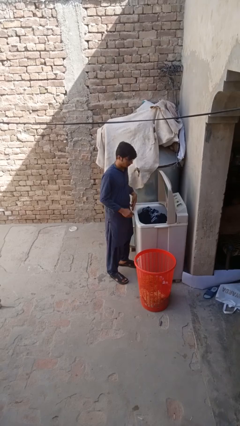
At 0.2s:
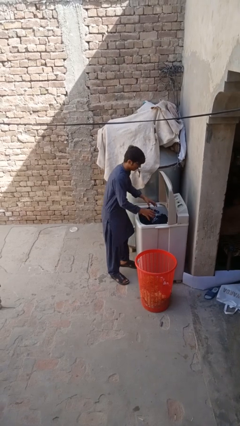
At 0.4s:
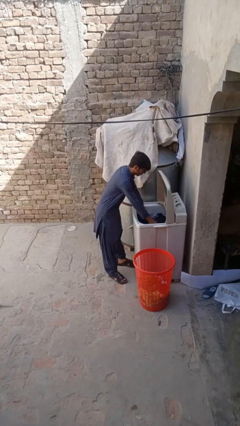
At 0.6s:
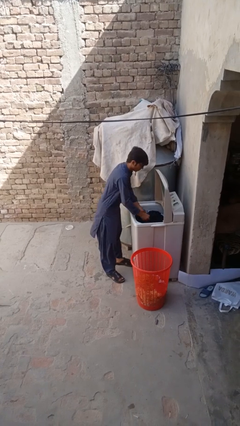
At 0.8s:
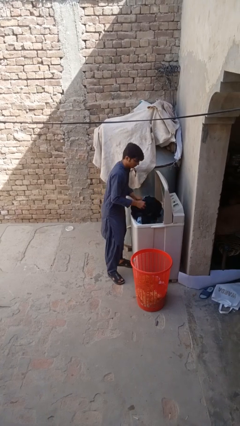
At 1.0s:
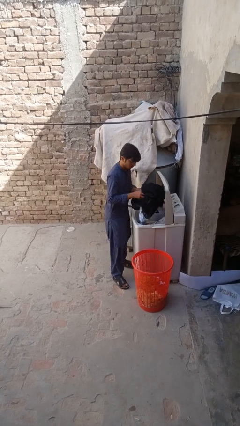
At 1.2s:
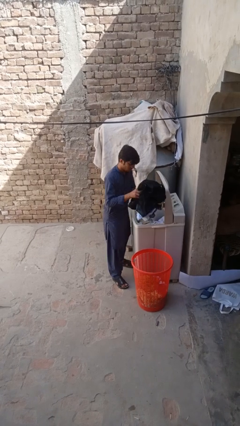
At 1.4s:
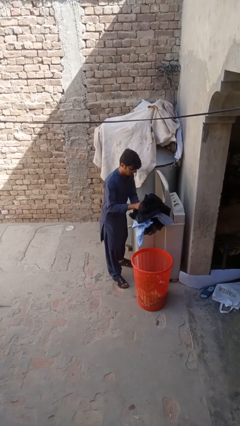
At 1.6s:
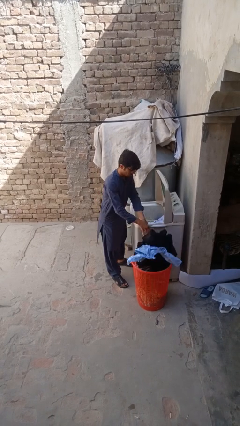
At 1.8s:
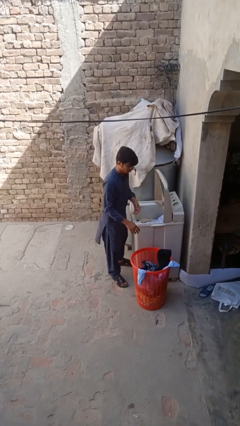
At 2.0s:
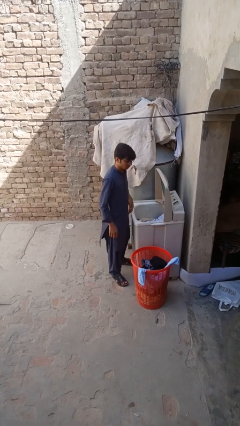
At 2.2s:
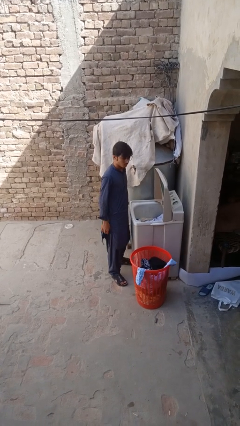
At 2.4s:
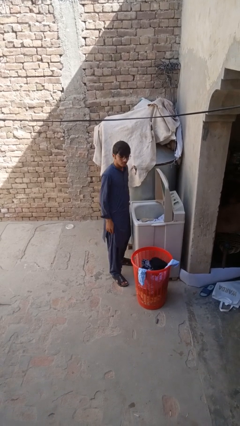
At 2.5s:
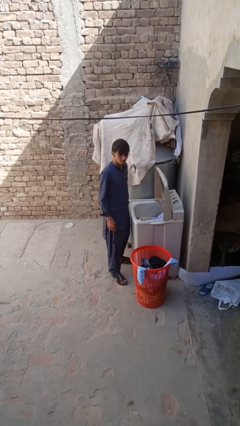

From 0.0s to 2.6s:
person unloads clotheswasher

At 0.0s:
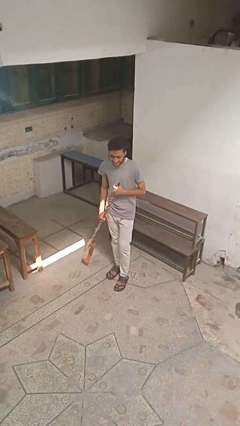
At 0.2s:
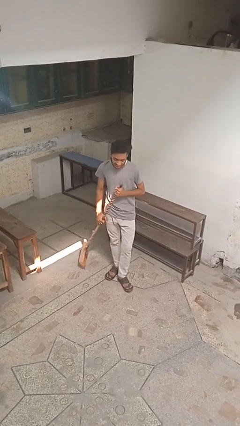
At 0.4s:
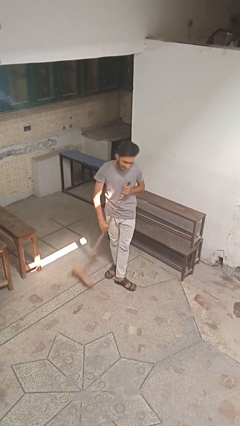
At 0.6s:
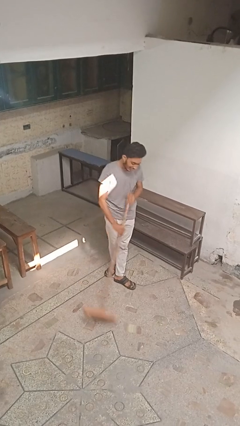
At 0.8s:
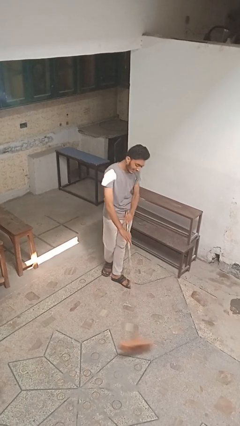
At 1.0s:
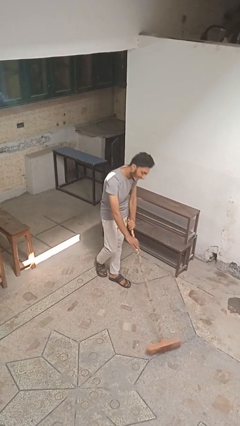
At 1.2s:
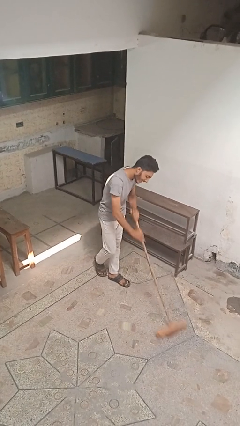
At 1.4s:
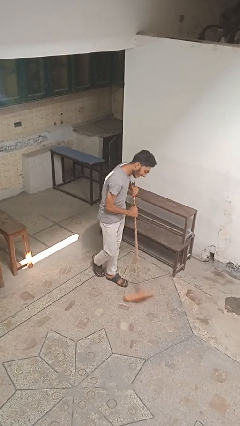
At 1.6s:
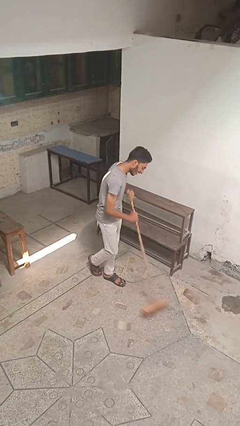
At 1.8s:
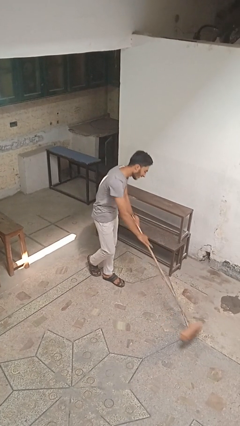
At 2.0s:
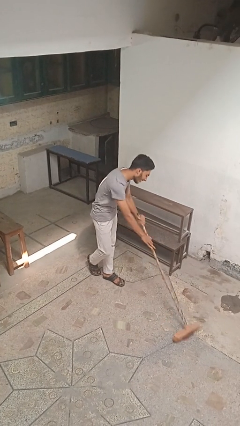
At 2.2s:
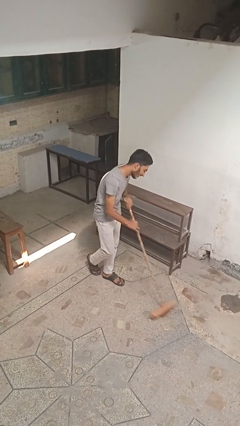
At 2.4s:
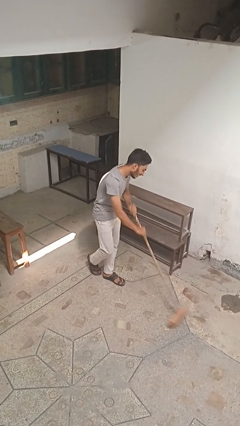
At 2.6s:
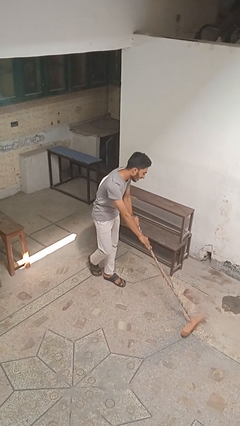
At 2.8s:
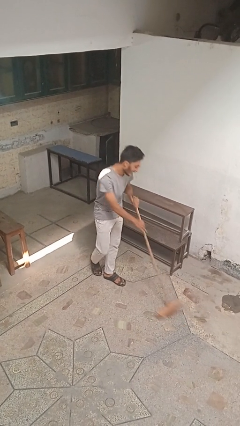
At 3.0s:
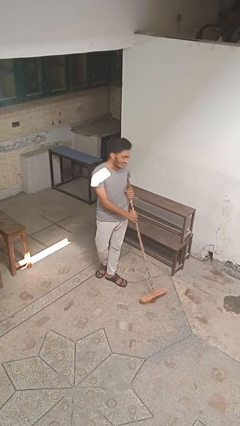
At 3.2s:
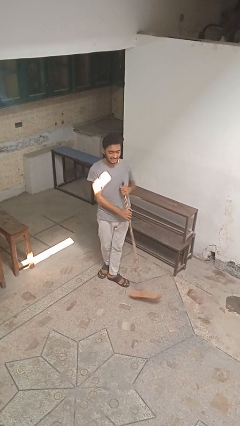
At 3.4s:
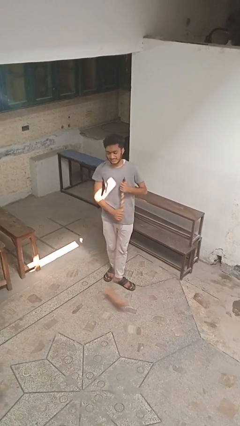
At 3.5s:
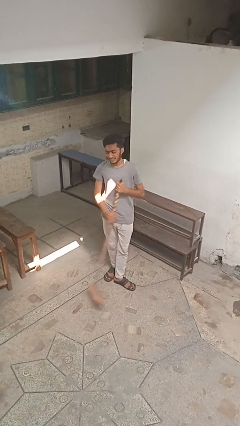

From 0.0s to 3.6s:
person sweeps floor

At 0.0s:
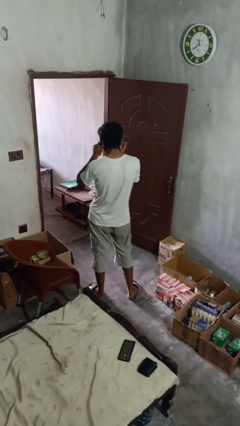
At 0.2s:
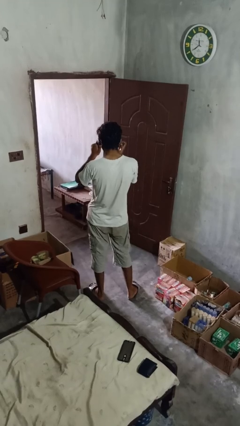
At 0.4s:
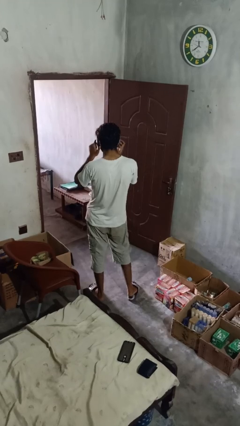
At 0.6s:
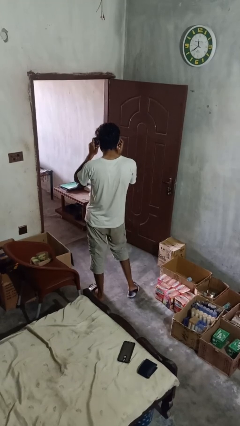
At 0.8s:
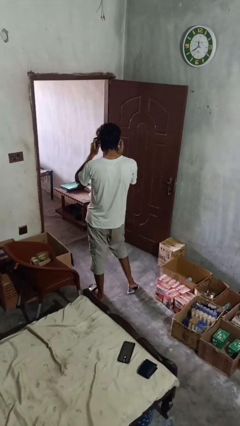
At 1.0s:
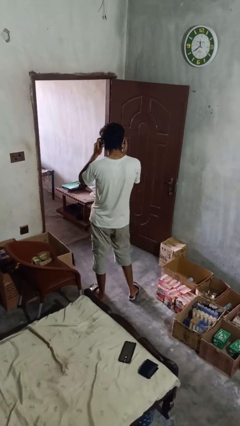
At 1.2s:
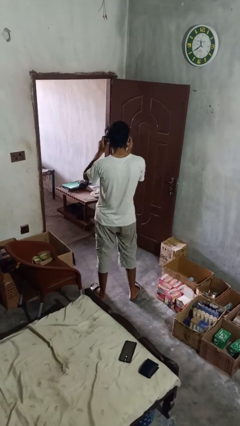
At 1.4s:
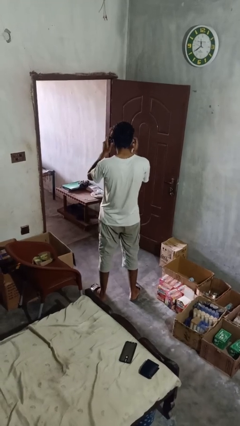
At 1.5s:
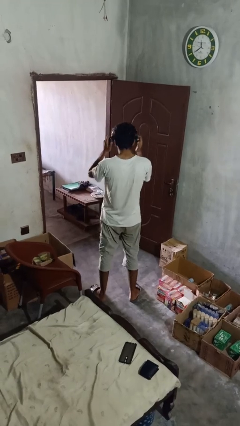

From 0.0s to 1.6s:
person puts on headphones

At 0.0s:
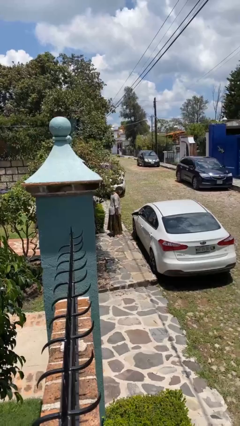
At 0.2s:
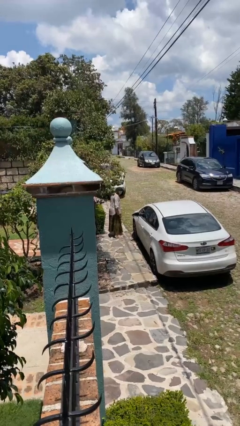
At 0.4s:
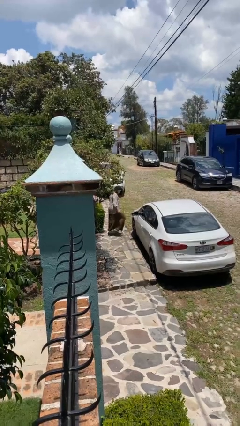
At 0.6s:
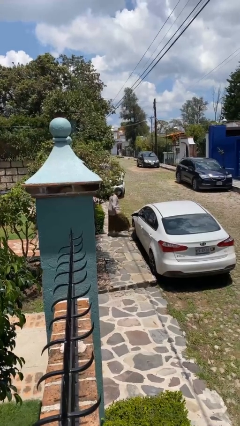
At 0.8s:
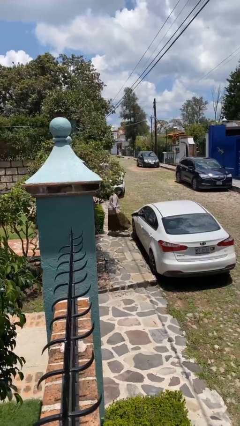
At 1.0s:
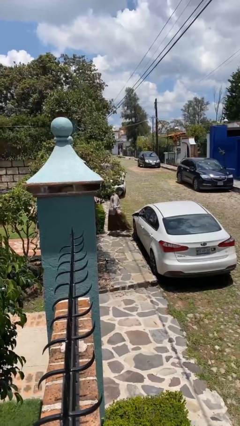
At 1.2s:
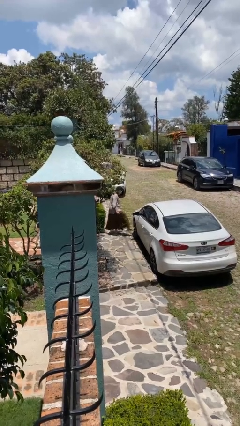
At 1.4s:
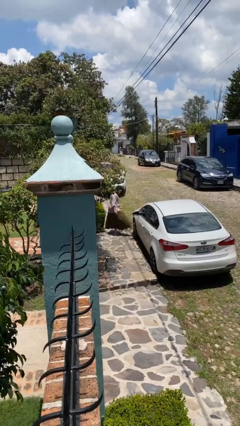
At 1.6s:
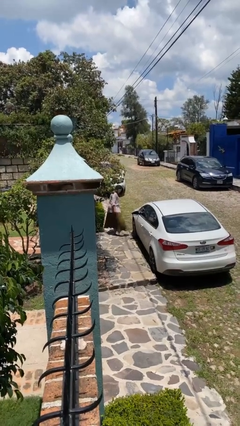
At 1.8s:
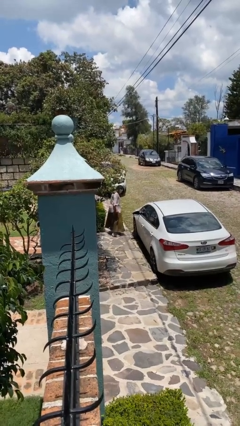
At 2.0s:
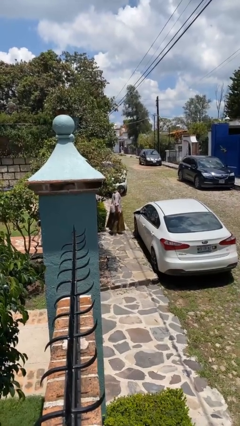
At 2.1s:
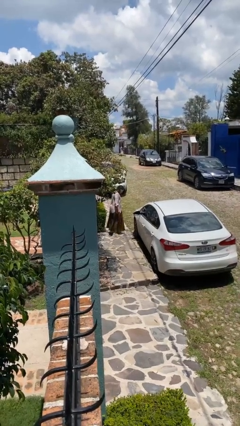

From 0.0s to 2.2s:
person kicks car tires

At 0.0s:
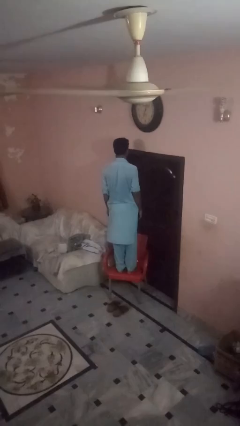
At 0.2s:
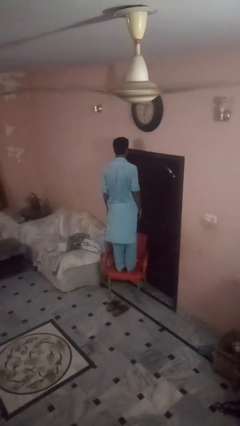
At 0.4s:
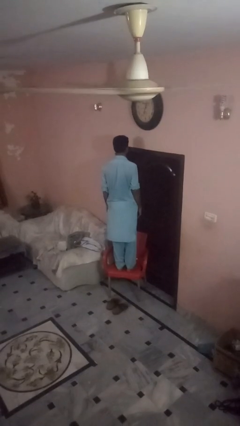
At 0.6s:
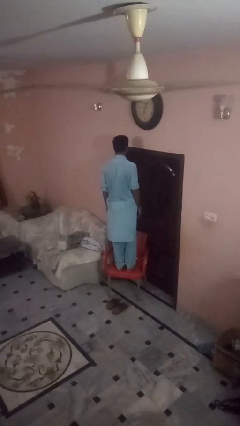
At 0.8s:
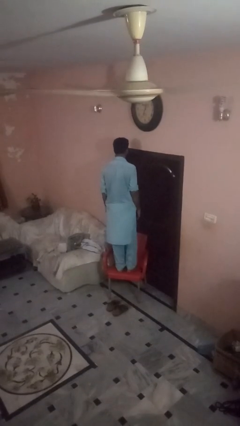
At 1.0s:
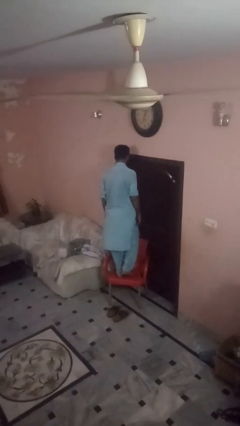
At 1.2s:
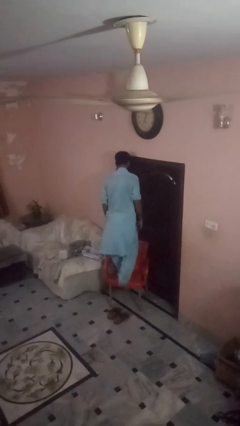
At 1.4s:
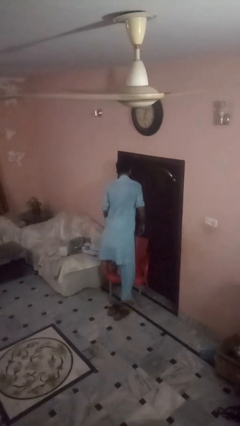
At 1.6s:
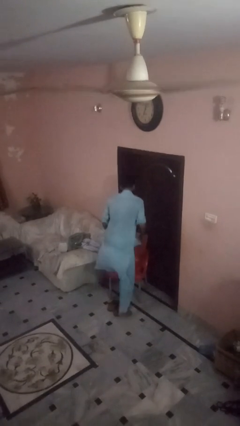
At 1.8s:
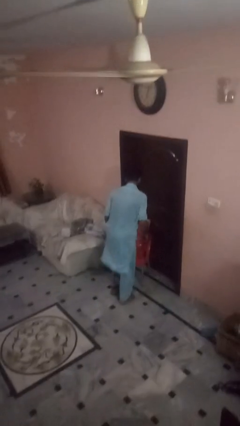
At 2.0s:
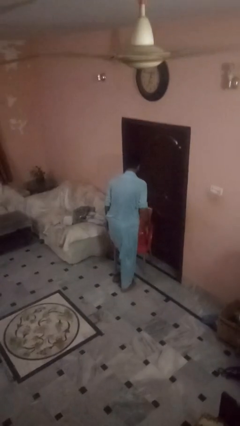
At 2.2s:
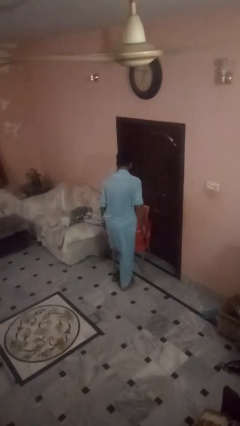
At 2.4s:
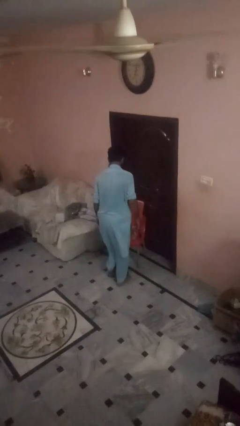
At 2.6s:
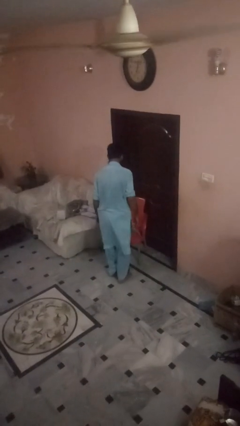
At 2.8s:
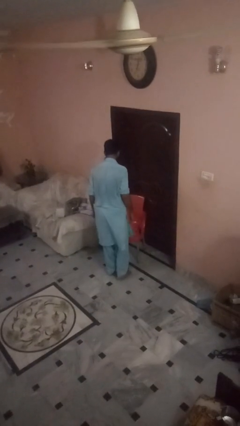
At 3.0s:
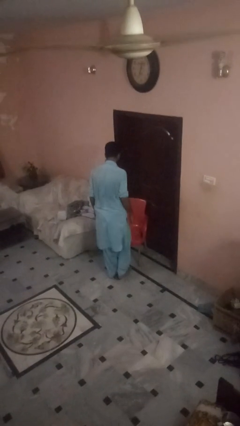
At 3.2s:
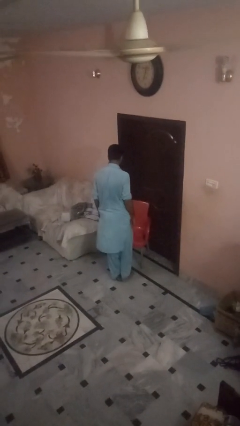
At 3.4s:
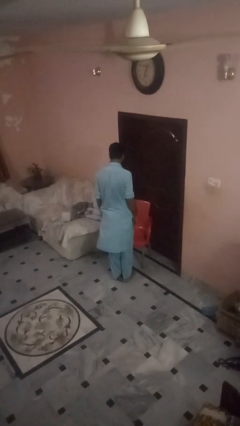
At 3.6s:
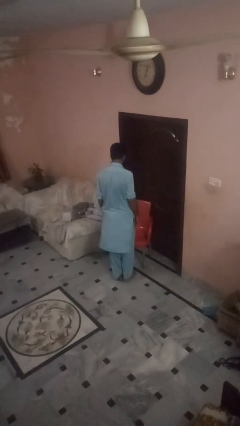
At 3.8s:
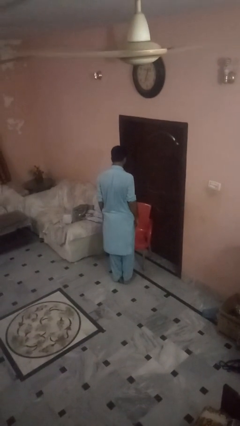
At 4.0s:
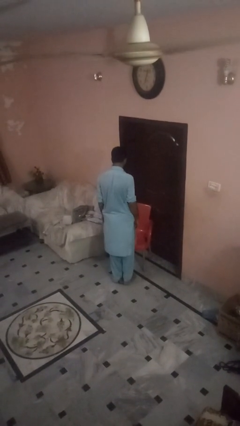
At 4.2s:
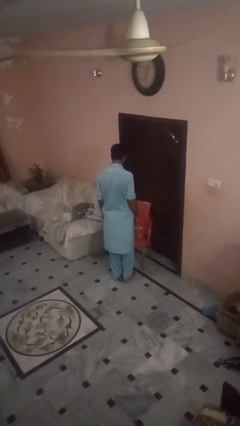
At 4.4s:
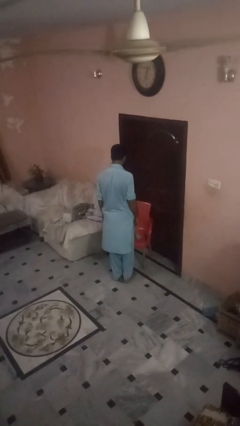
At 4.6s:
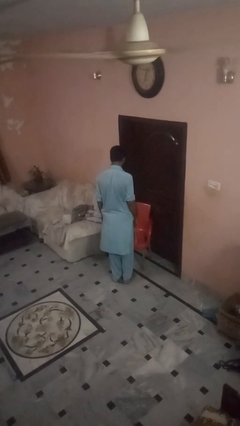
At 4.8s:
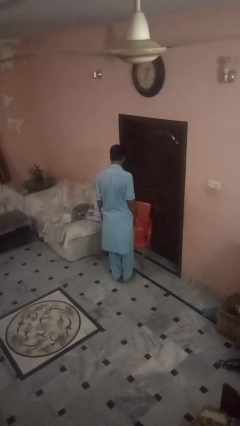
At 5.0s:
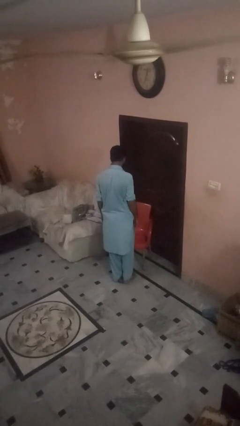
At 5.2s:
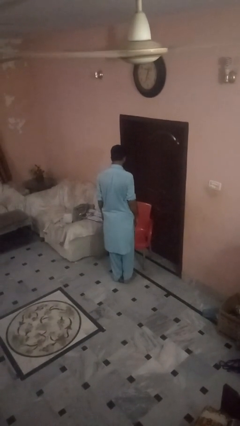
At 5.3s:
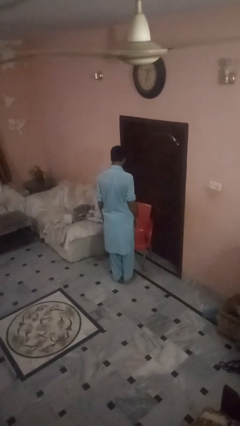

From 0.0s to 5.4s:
person climbs off chair

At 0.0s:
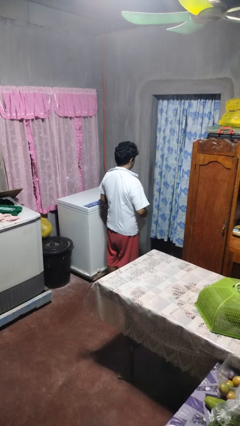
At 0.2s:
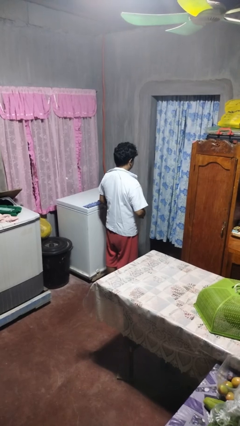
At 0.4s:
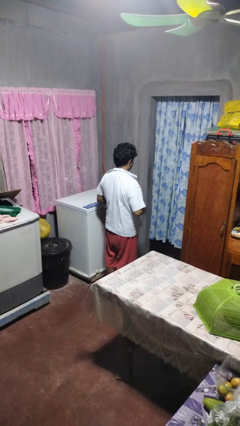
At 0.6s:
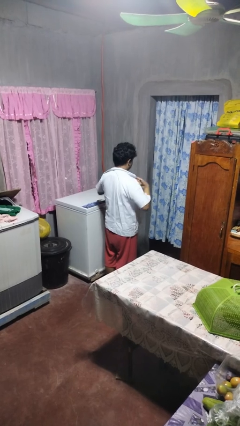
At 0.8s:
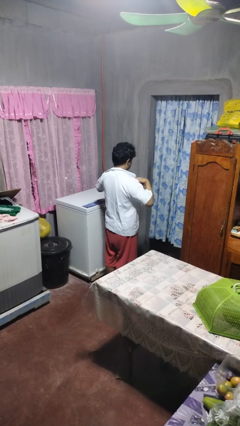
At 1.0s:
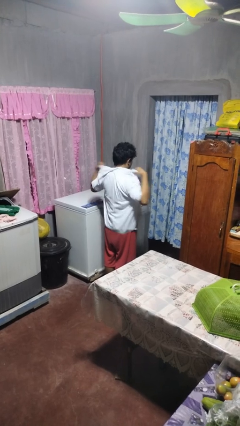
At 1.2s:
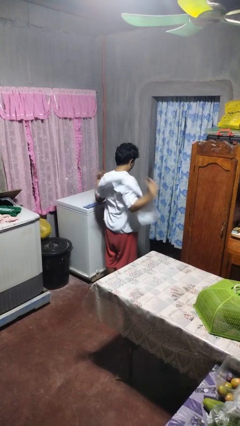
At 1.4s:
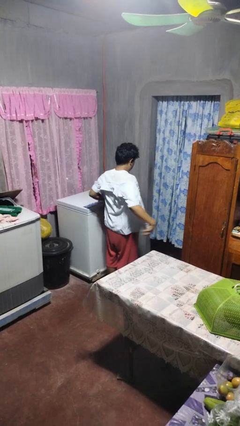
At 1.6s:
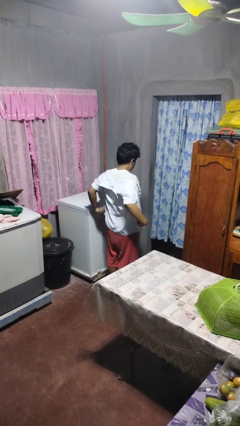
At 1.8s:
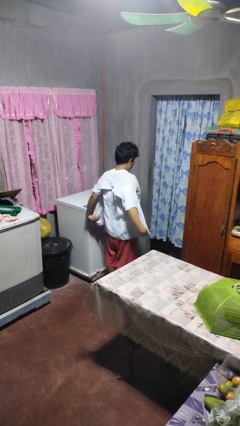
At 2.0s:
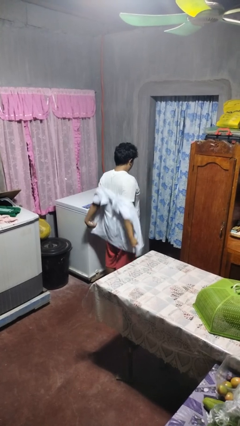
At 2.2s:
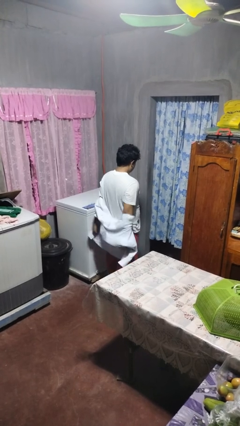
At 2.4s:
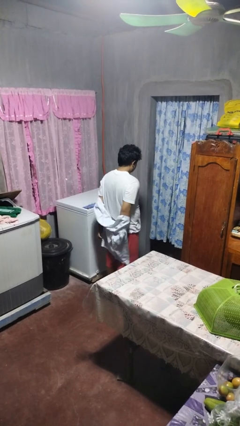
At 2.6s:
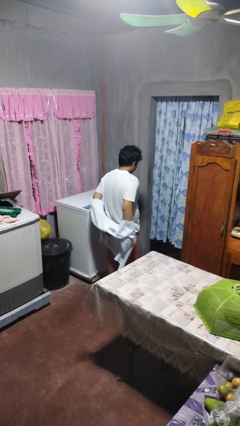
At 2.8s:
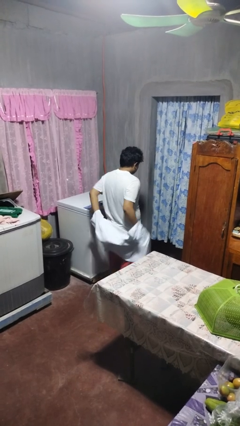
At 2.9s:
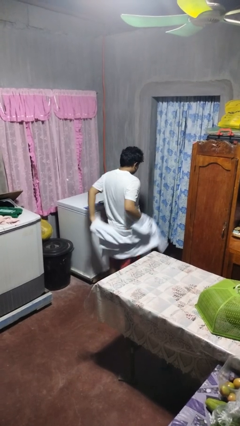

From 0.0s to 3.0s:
person takes off shirt
